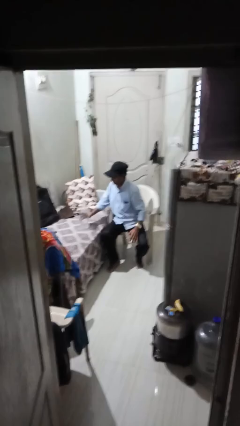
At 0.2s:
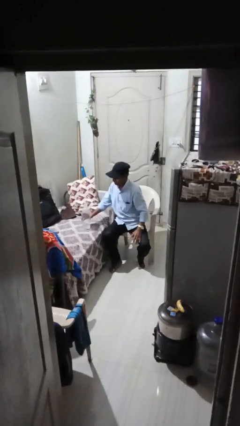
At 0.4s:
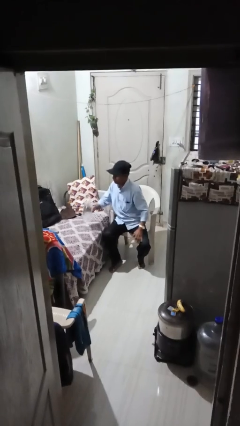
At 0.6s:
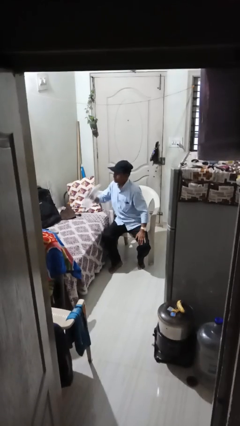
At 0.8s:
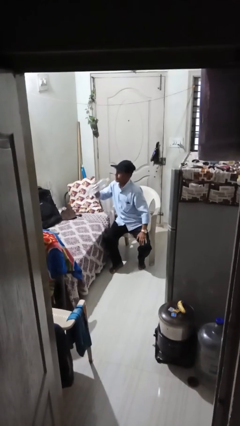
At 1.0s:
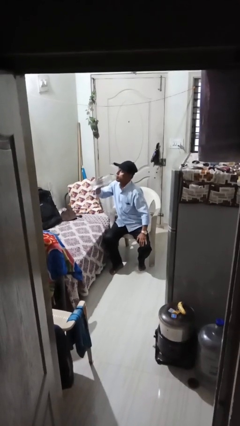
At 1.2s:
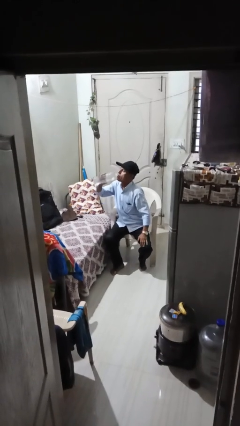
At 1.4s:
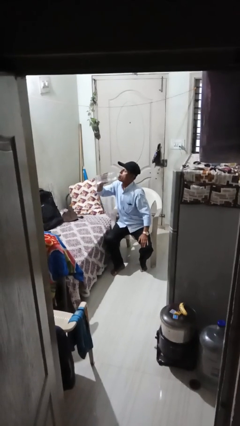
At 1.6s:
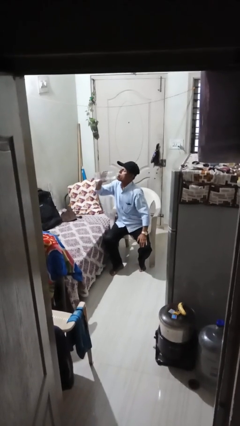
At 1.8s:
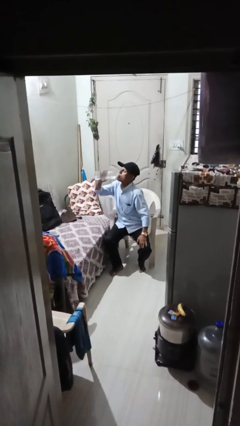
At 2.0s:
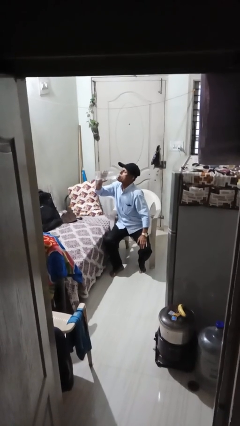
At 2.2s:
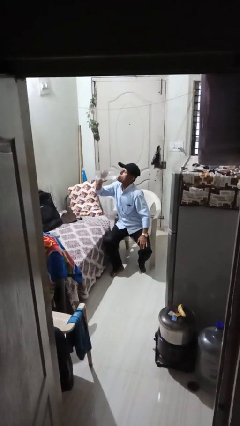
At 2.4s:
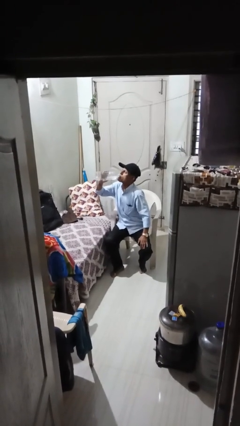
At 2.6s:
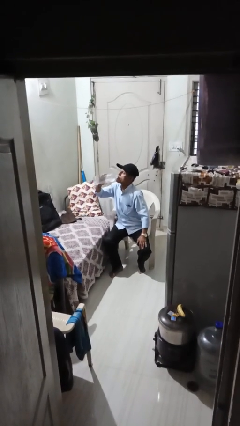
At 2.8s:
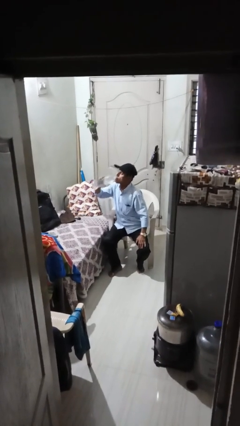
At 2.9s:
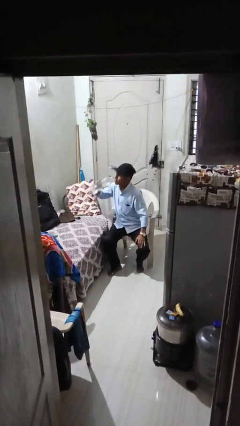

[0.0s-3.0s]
person drinks from bottle

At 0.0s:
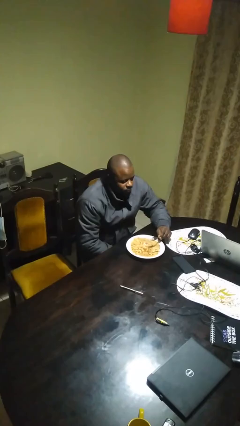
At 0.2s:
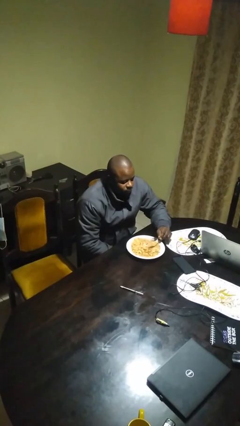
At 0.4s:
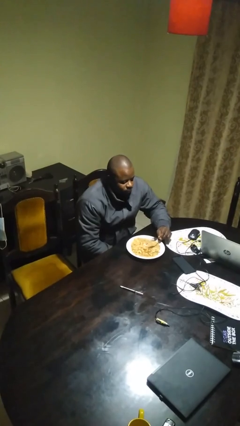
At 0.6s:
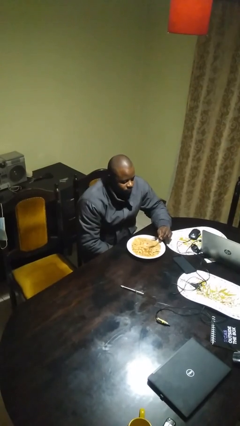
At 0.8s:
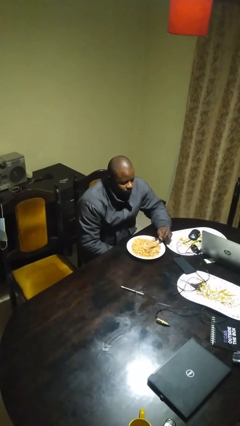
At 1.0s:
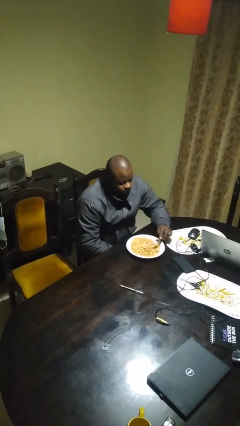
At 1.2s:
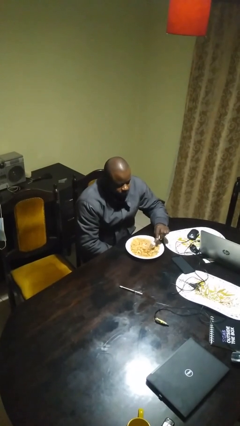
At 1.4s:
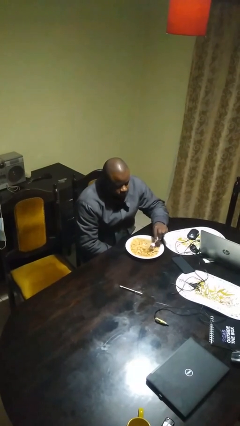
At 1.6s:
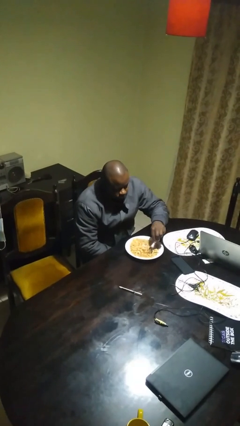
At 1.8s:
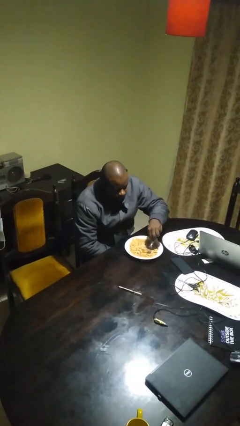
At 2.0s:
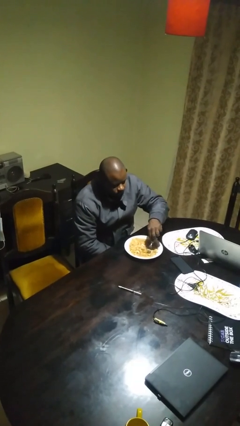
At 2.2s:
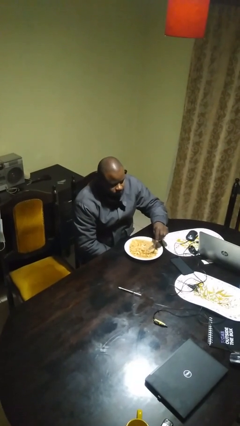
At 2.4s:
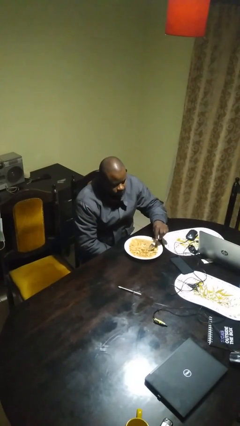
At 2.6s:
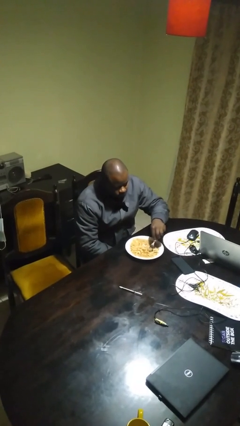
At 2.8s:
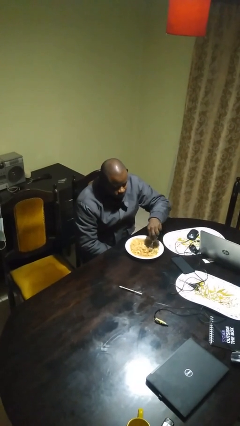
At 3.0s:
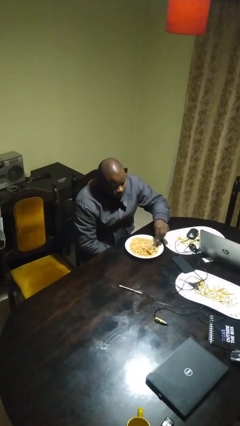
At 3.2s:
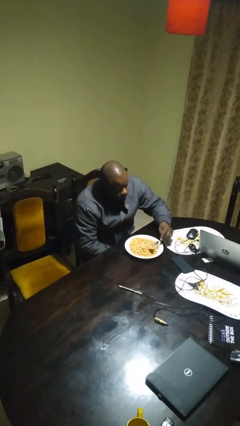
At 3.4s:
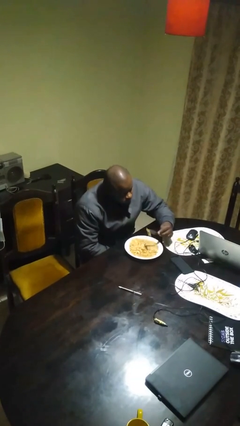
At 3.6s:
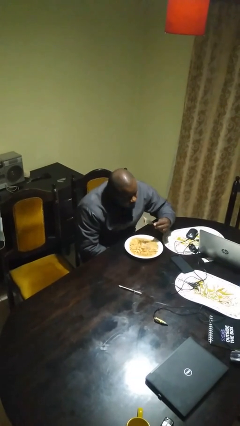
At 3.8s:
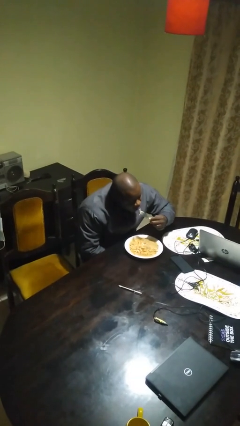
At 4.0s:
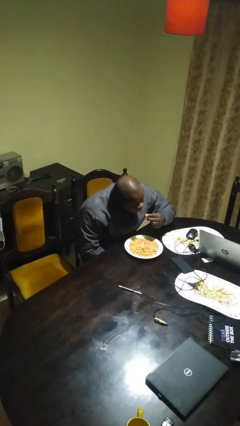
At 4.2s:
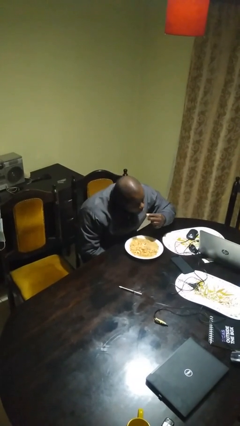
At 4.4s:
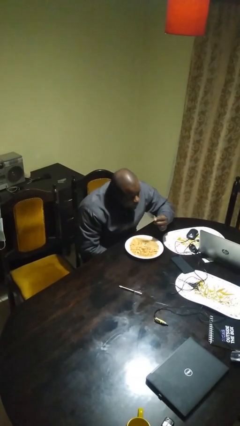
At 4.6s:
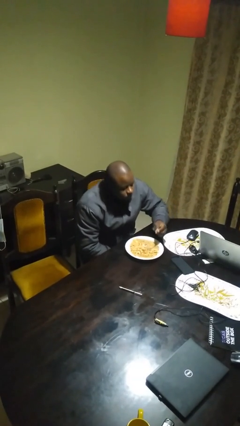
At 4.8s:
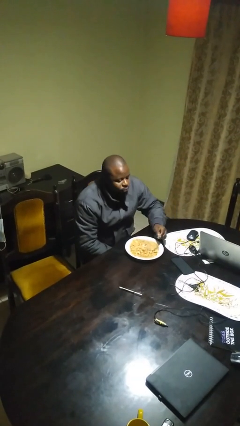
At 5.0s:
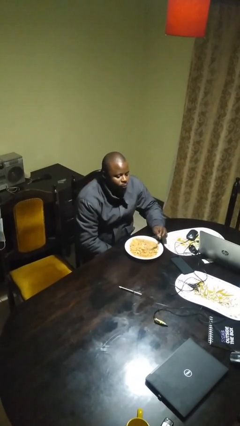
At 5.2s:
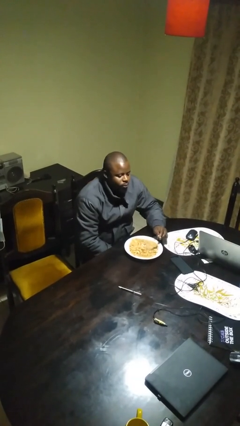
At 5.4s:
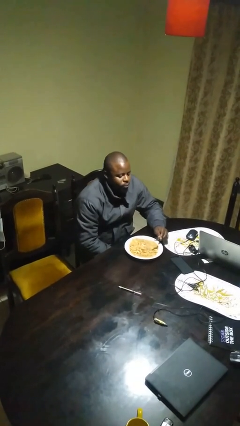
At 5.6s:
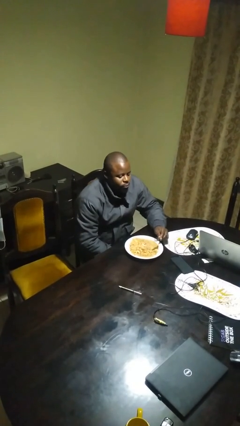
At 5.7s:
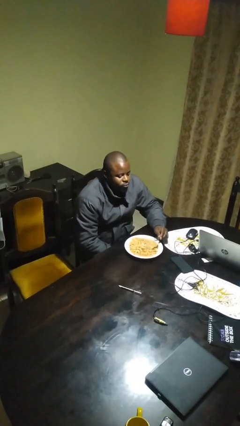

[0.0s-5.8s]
person eats with utensil

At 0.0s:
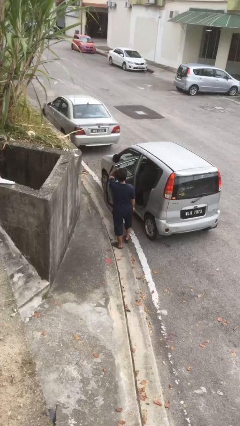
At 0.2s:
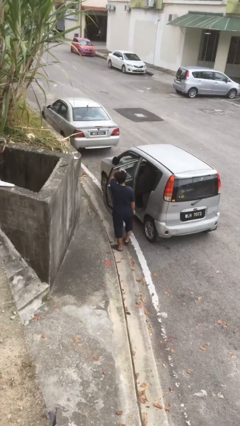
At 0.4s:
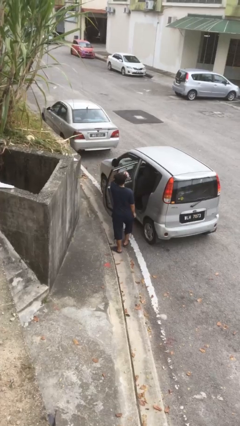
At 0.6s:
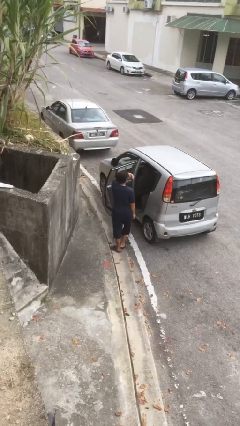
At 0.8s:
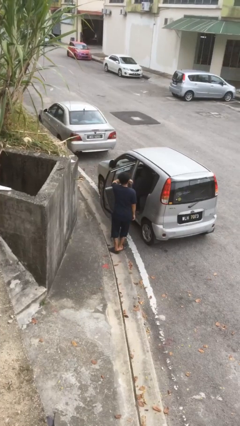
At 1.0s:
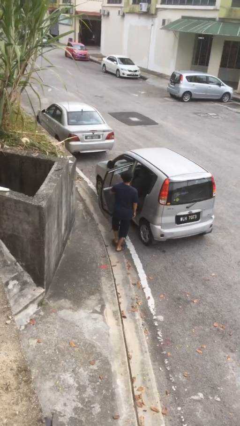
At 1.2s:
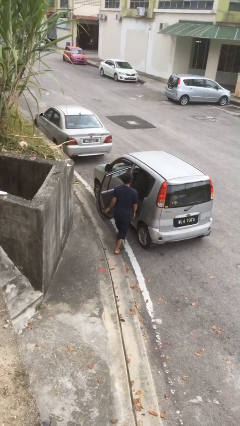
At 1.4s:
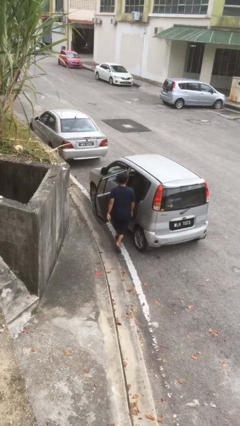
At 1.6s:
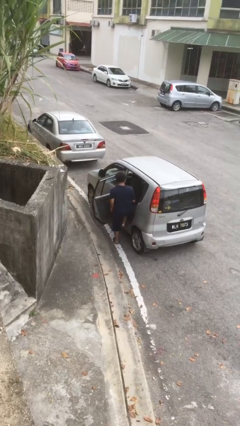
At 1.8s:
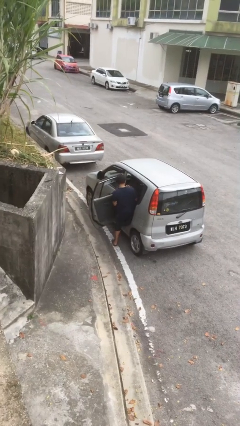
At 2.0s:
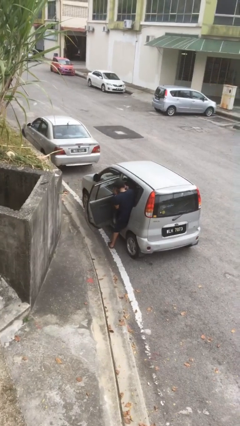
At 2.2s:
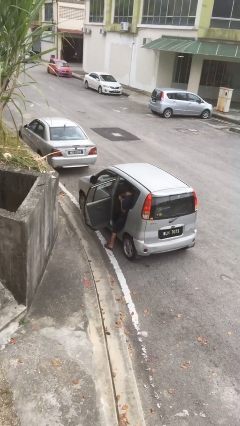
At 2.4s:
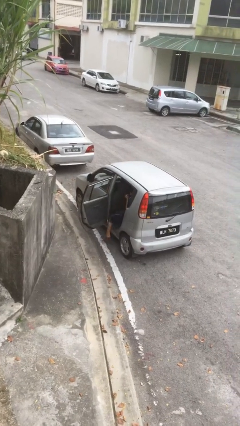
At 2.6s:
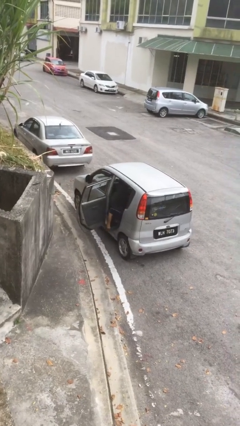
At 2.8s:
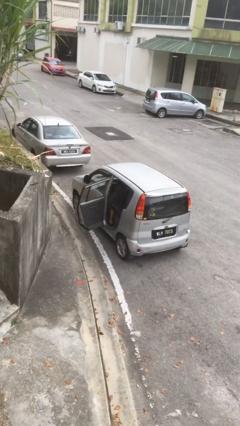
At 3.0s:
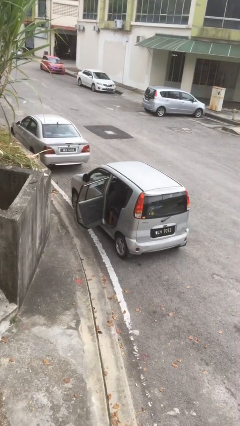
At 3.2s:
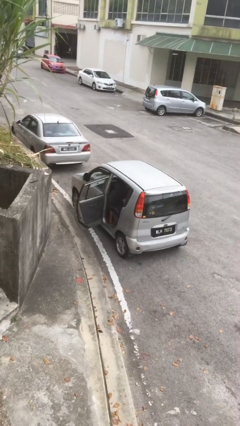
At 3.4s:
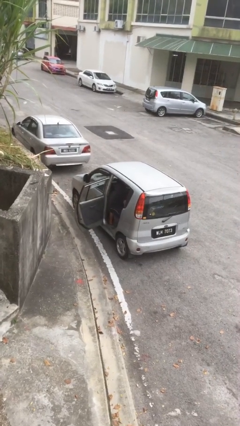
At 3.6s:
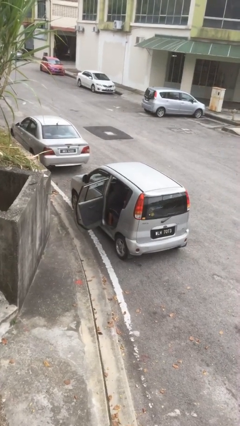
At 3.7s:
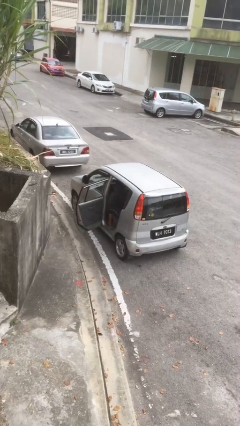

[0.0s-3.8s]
person enters car

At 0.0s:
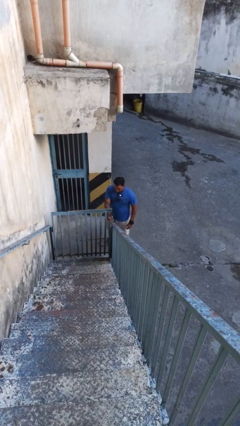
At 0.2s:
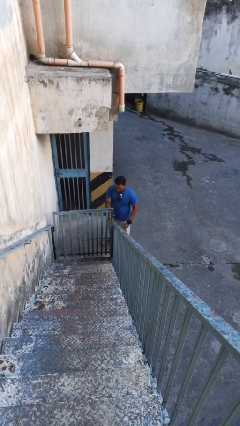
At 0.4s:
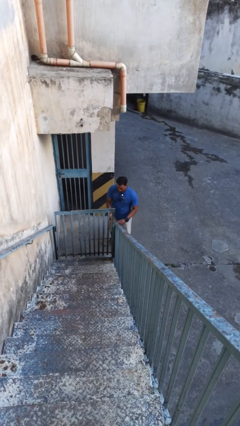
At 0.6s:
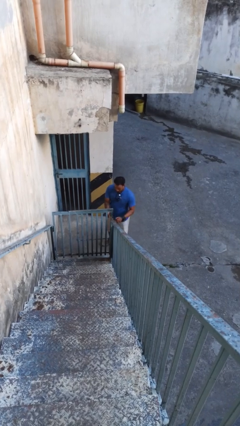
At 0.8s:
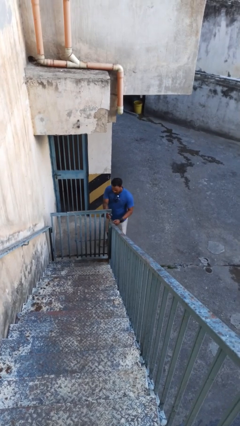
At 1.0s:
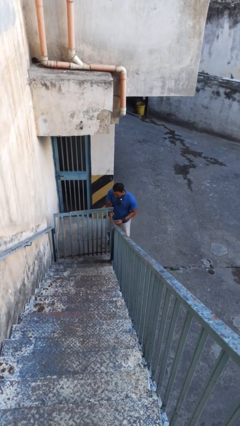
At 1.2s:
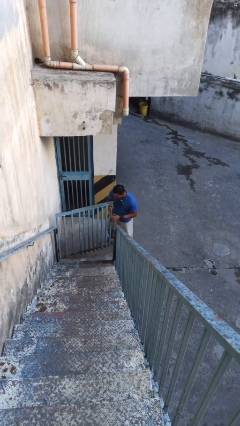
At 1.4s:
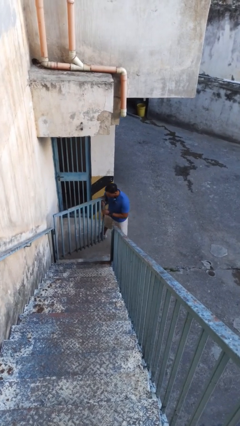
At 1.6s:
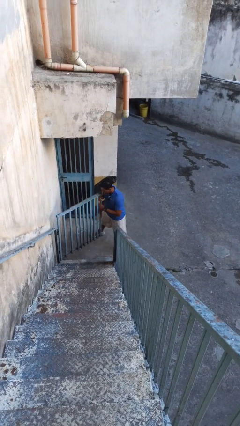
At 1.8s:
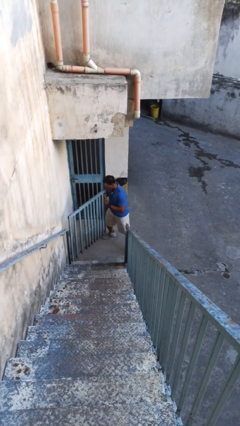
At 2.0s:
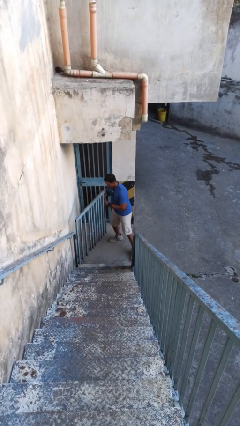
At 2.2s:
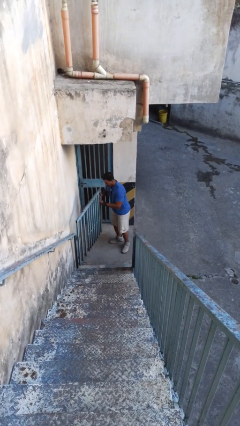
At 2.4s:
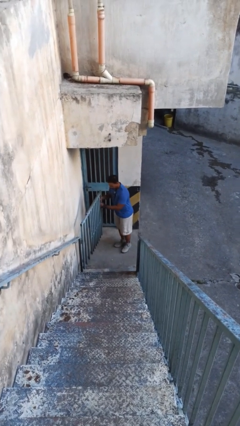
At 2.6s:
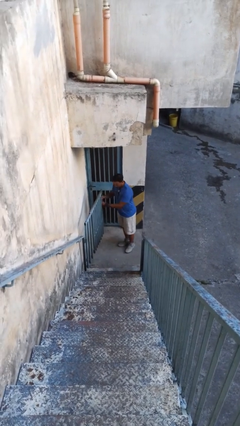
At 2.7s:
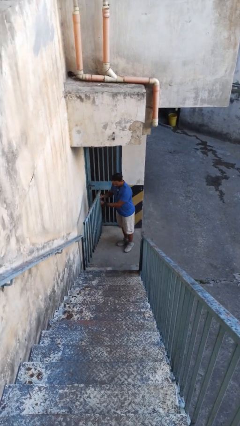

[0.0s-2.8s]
person opens facility door

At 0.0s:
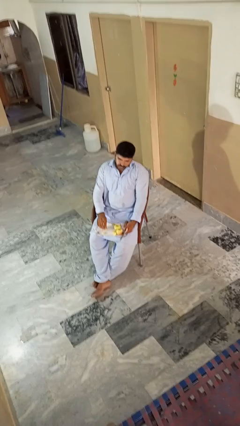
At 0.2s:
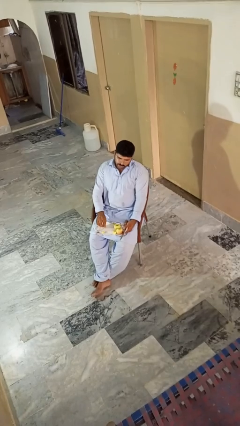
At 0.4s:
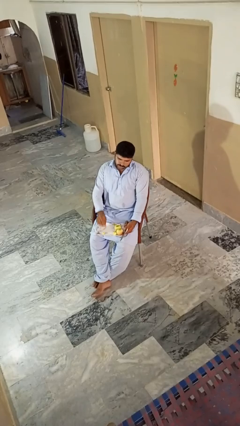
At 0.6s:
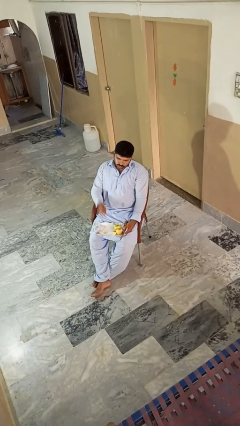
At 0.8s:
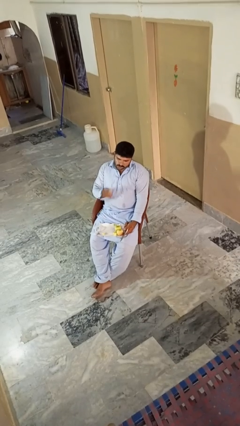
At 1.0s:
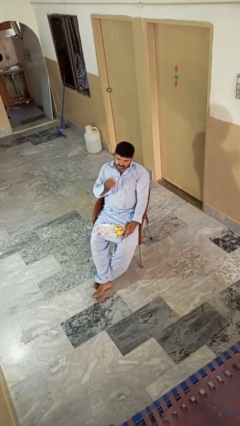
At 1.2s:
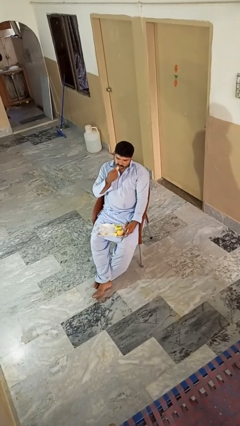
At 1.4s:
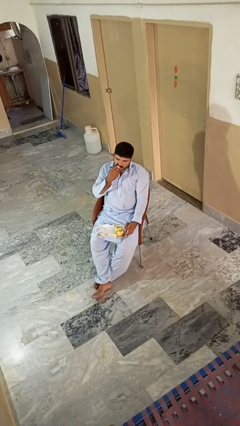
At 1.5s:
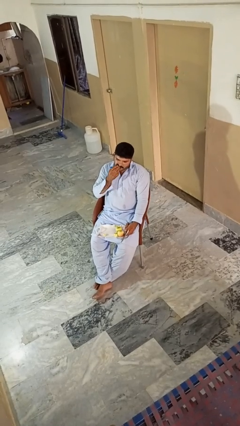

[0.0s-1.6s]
person eats apple

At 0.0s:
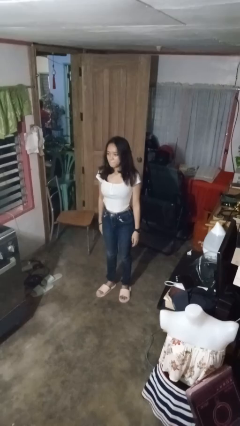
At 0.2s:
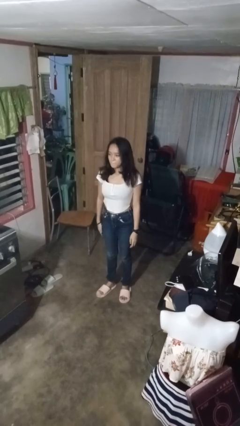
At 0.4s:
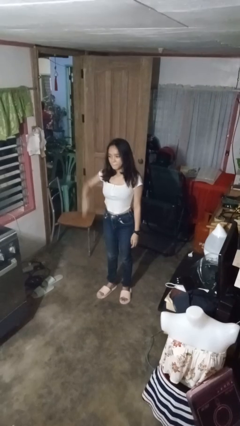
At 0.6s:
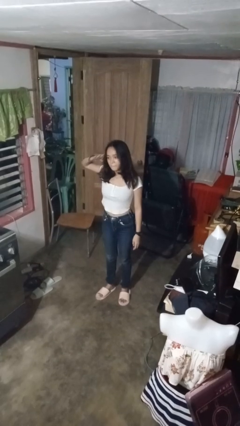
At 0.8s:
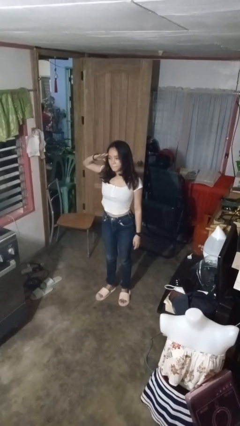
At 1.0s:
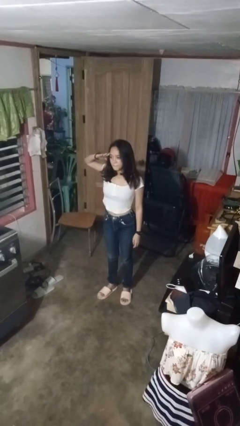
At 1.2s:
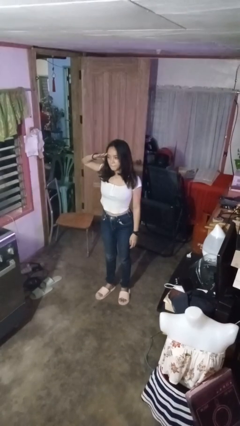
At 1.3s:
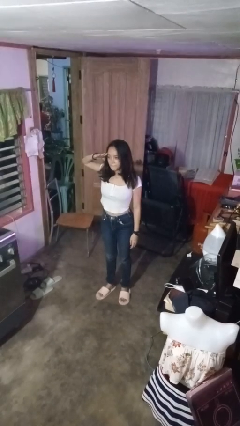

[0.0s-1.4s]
person salutes
